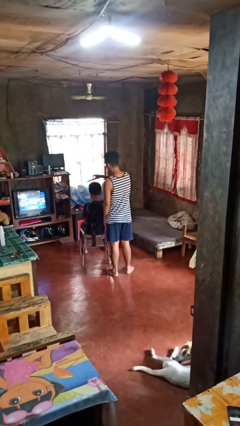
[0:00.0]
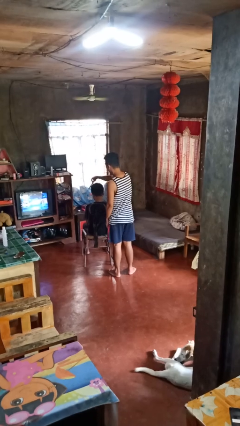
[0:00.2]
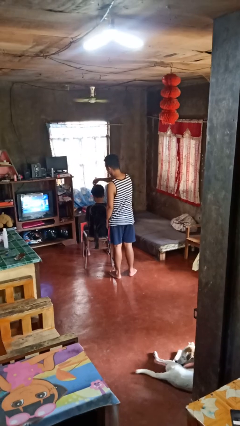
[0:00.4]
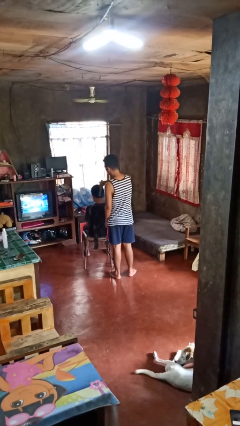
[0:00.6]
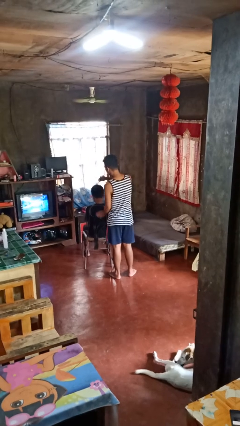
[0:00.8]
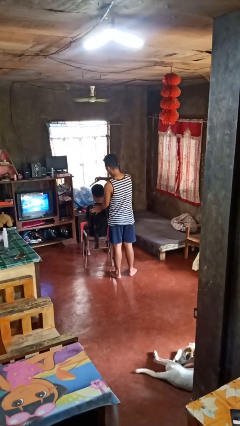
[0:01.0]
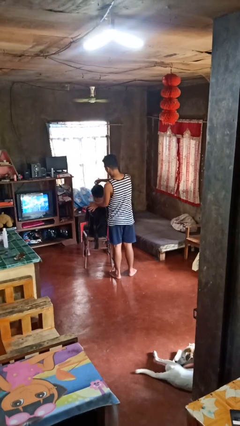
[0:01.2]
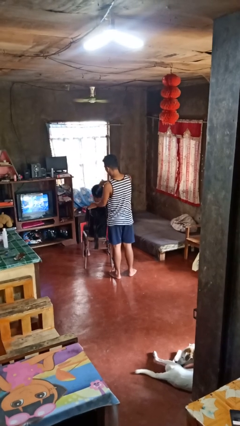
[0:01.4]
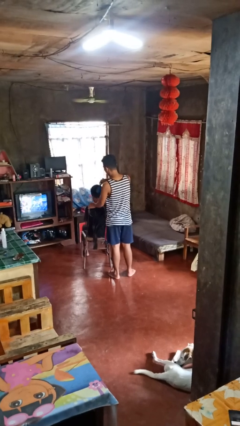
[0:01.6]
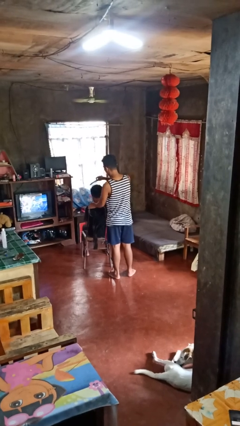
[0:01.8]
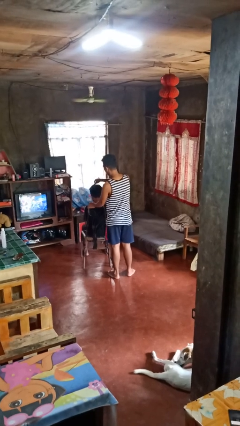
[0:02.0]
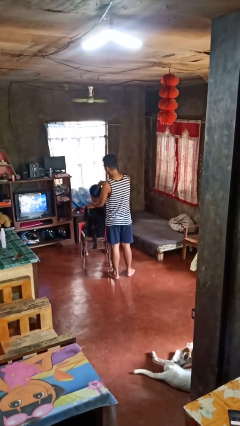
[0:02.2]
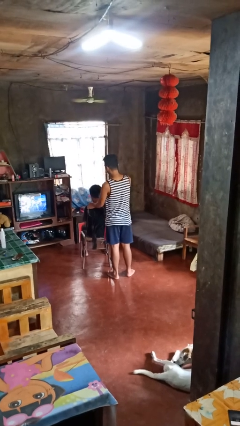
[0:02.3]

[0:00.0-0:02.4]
person brushes hair of person

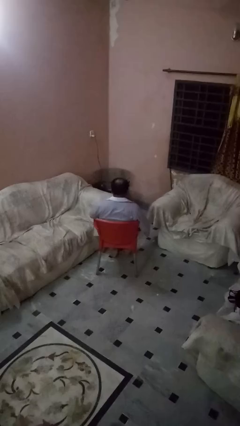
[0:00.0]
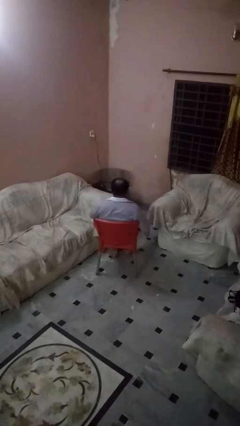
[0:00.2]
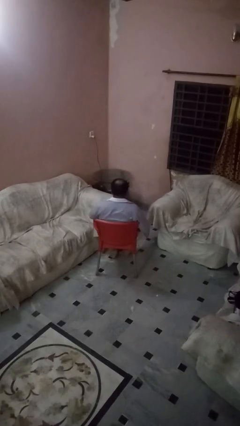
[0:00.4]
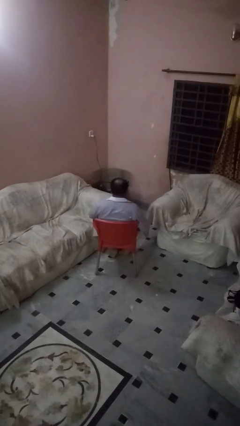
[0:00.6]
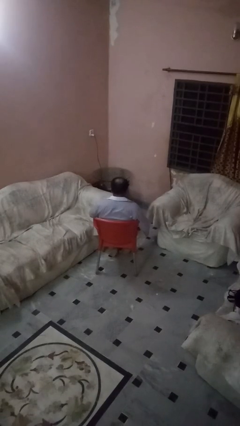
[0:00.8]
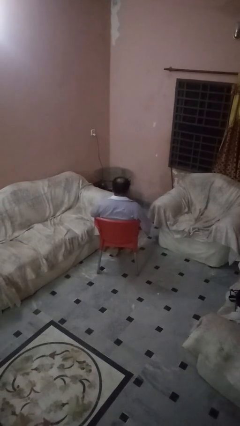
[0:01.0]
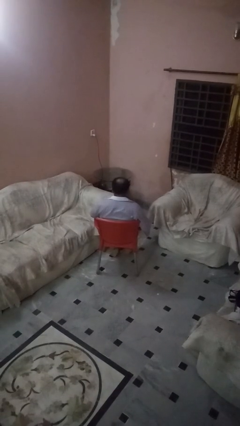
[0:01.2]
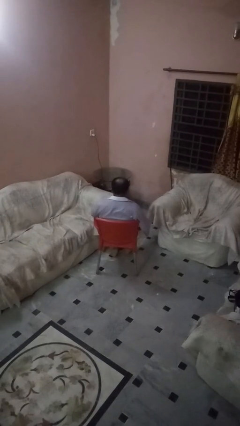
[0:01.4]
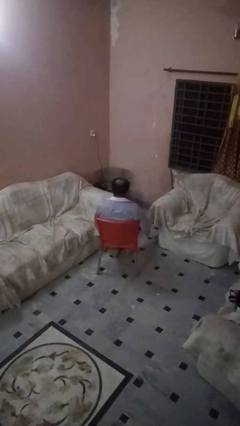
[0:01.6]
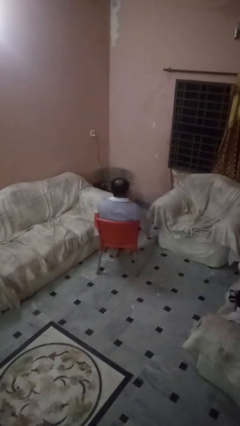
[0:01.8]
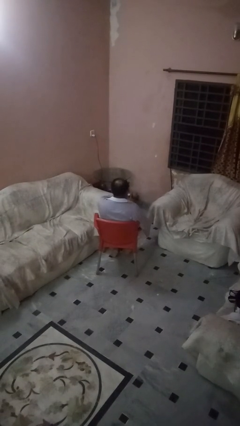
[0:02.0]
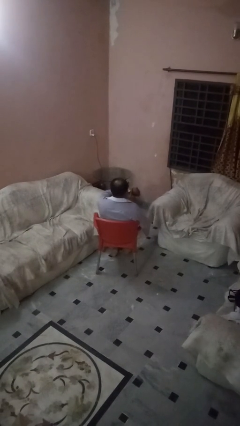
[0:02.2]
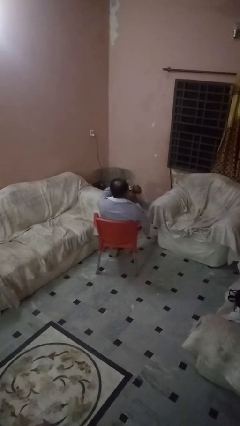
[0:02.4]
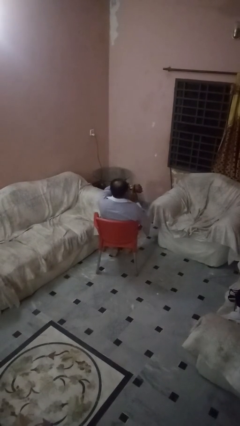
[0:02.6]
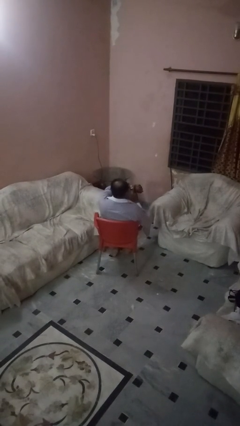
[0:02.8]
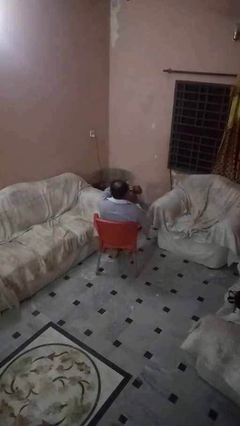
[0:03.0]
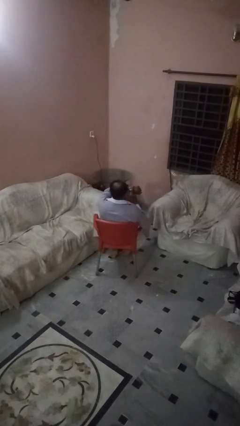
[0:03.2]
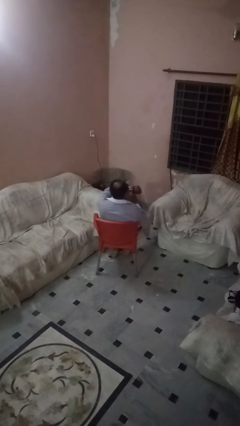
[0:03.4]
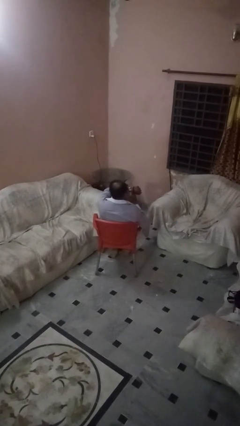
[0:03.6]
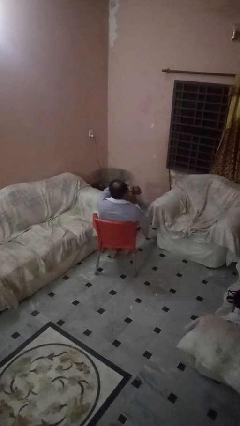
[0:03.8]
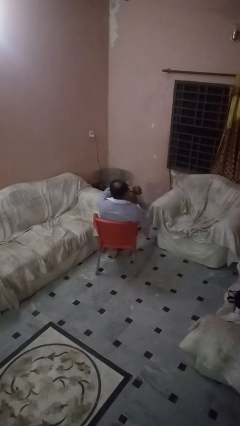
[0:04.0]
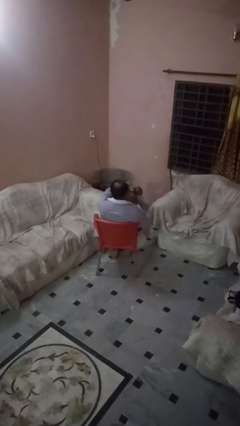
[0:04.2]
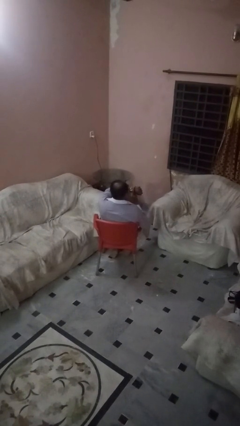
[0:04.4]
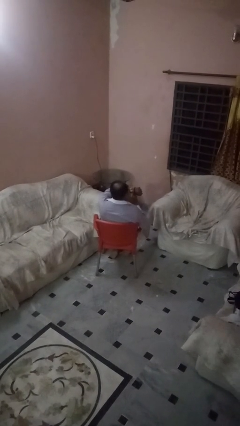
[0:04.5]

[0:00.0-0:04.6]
person gestures watch closely

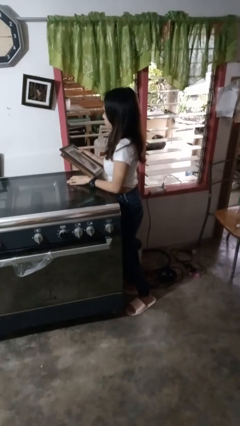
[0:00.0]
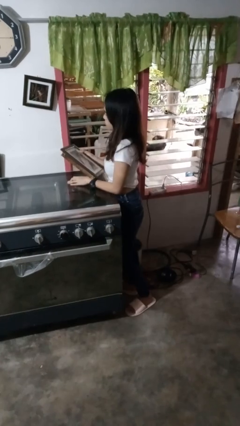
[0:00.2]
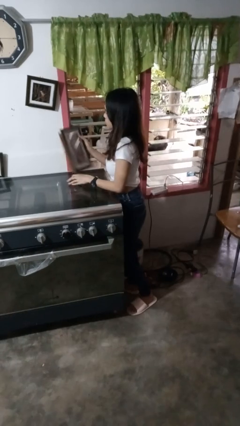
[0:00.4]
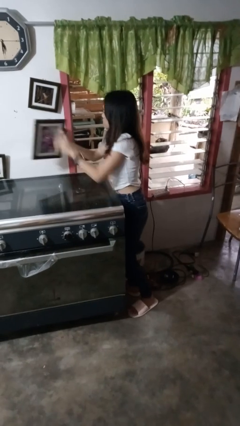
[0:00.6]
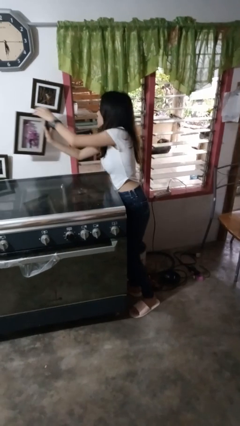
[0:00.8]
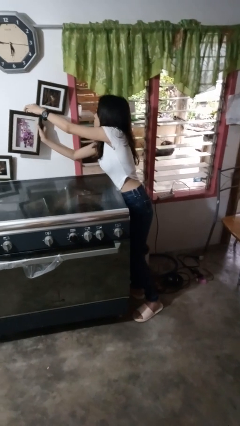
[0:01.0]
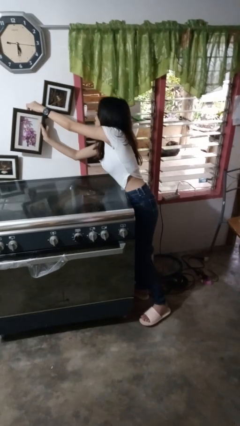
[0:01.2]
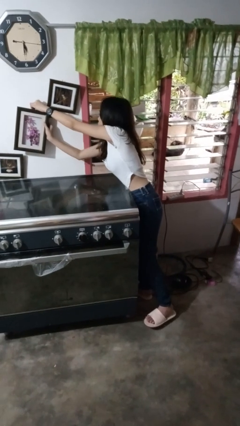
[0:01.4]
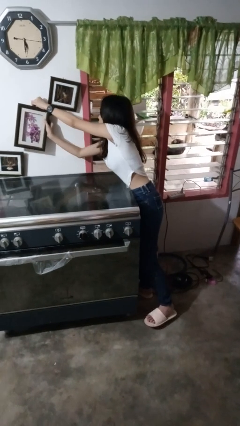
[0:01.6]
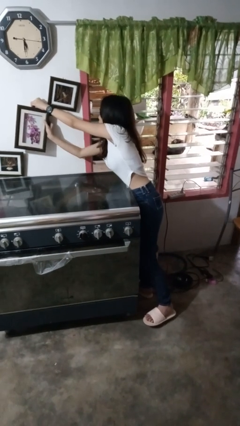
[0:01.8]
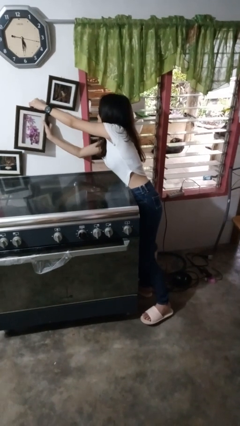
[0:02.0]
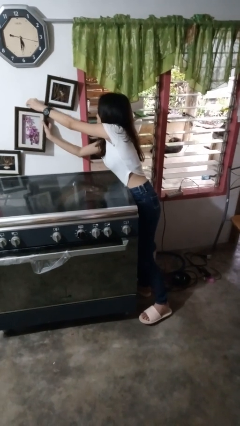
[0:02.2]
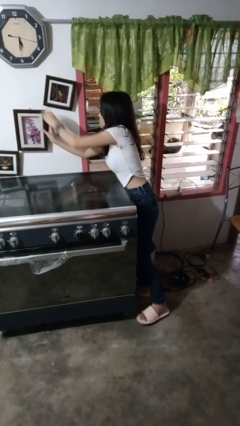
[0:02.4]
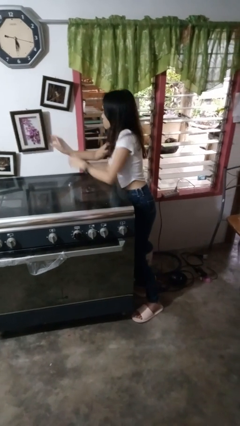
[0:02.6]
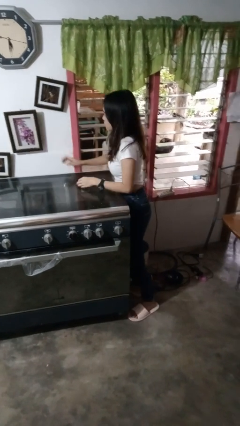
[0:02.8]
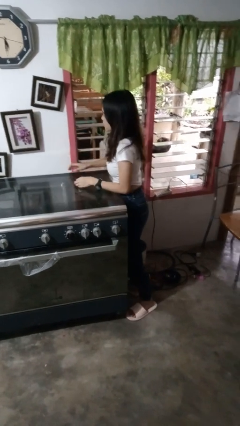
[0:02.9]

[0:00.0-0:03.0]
person puts up picture frame

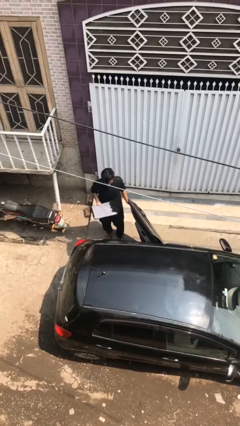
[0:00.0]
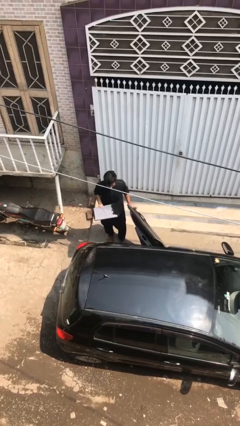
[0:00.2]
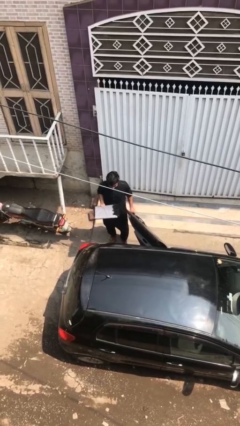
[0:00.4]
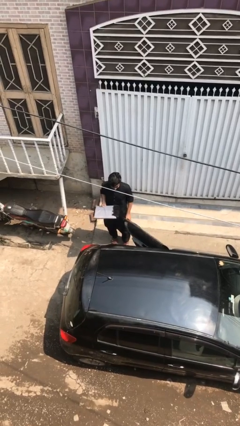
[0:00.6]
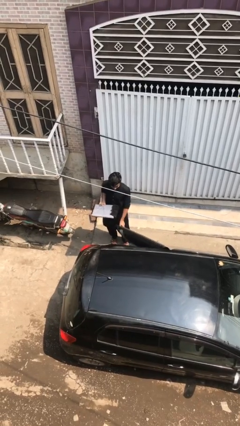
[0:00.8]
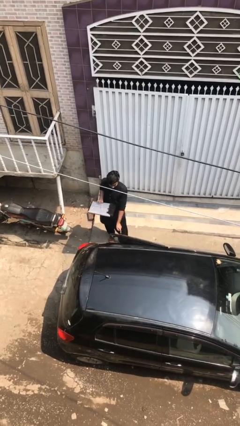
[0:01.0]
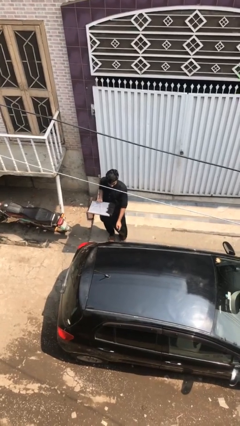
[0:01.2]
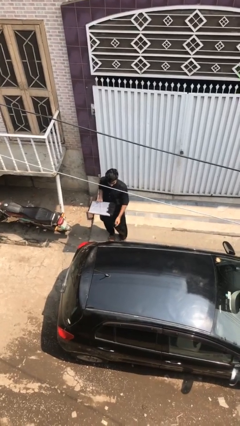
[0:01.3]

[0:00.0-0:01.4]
person closes car door

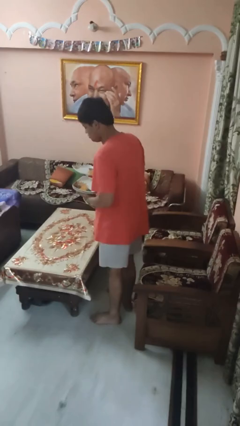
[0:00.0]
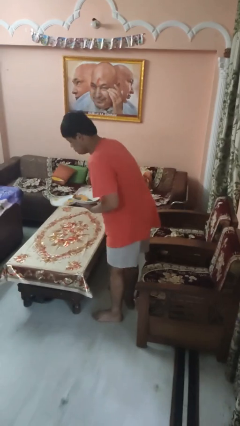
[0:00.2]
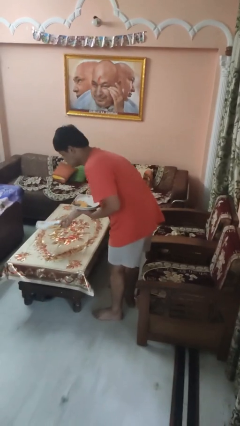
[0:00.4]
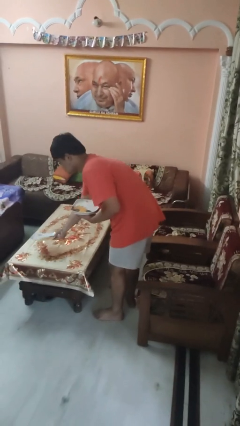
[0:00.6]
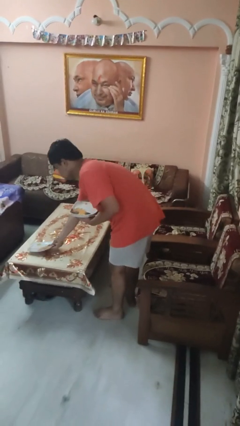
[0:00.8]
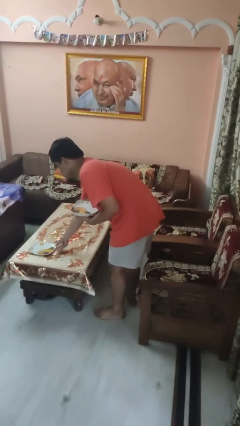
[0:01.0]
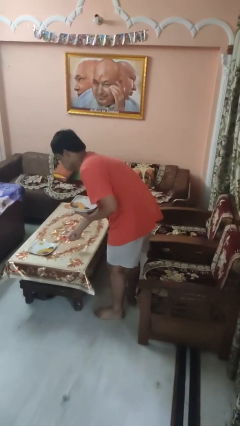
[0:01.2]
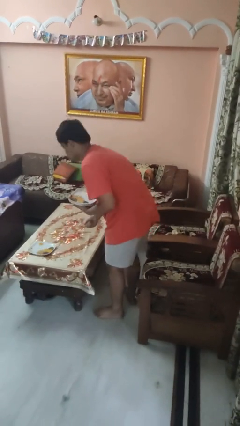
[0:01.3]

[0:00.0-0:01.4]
person sets table

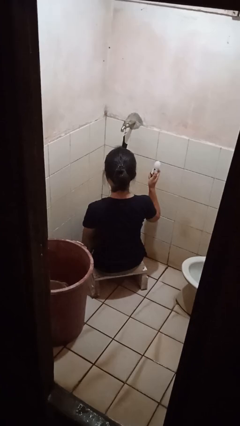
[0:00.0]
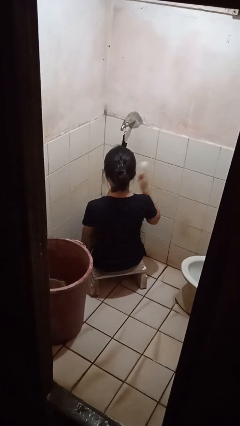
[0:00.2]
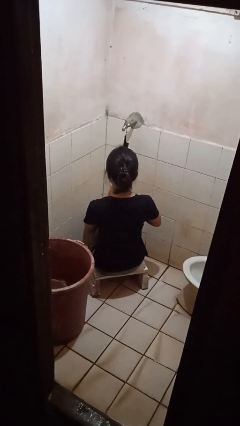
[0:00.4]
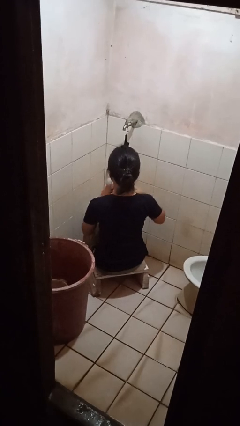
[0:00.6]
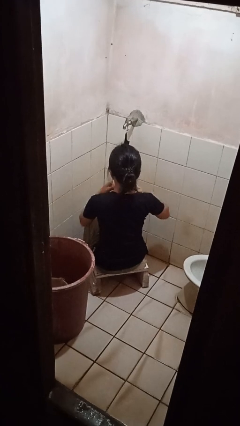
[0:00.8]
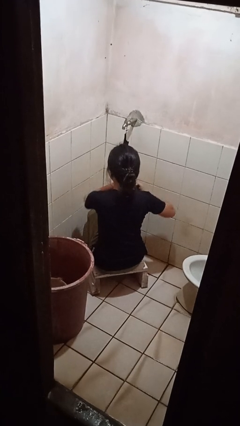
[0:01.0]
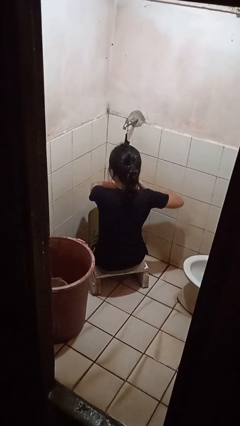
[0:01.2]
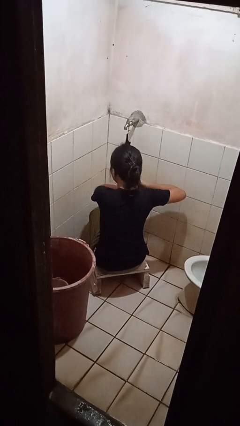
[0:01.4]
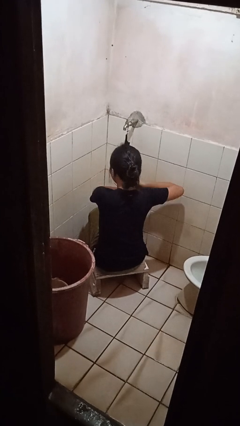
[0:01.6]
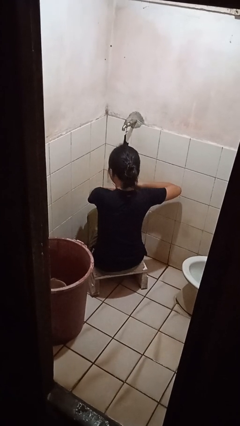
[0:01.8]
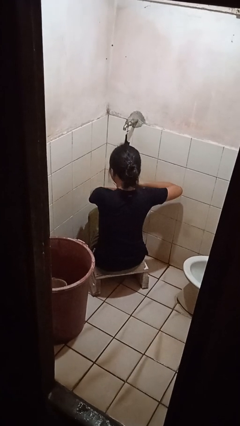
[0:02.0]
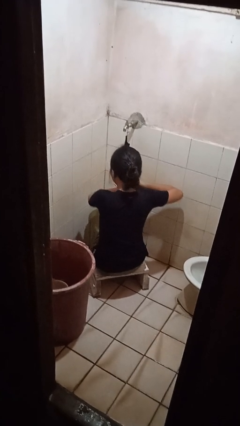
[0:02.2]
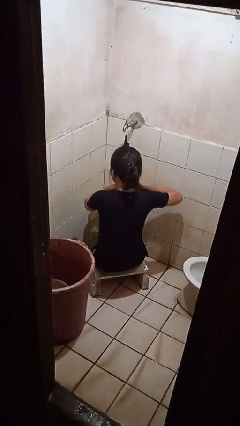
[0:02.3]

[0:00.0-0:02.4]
person applies deodorant

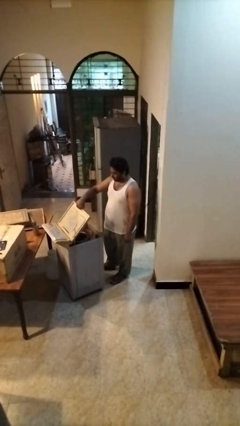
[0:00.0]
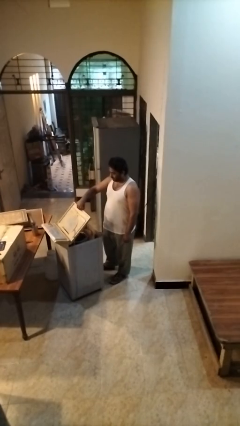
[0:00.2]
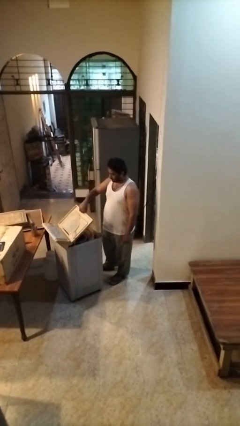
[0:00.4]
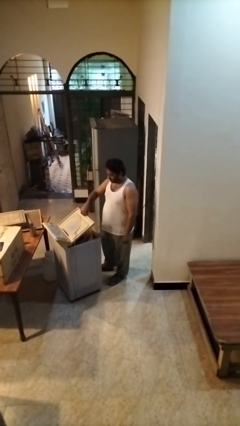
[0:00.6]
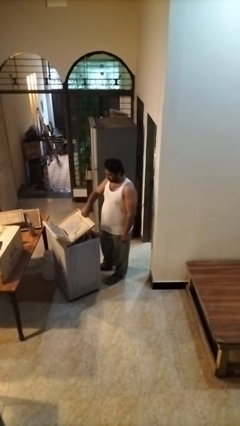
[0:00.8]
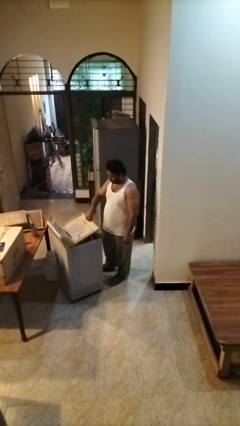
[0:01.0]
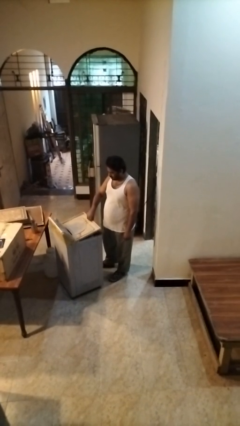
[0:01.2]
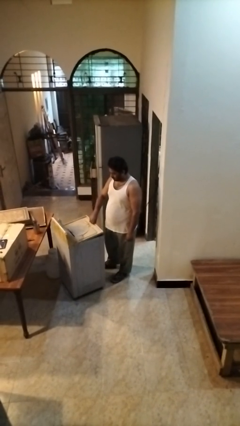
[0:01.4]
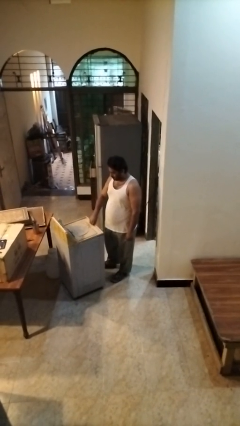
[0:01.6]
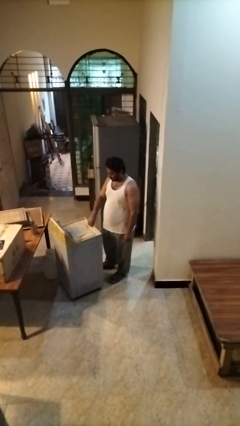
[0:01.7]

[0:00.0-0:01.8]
person closes clothes washer
